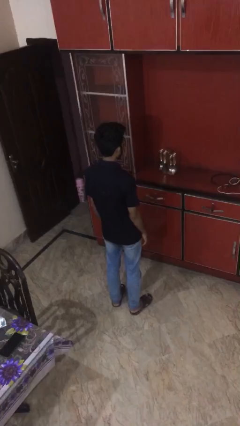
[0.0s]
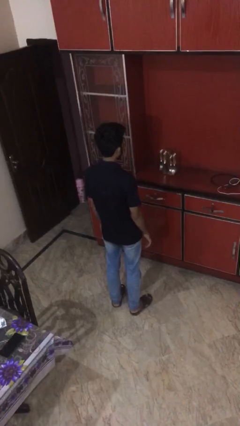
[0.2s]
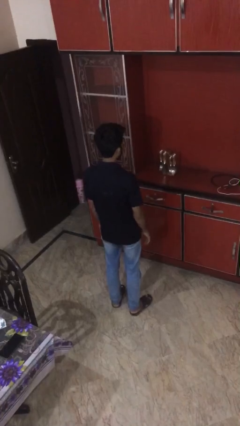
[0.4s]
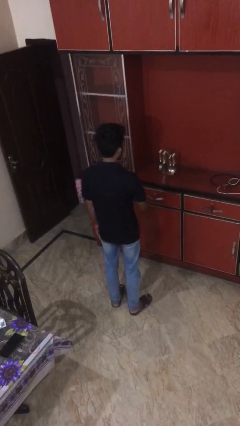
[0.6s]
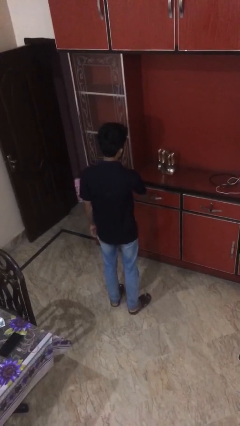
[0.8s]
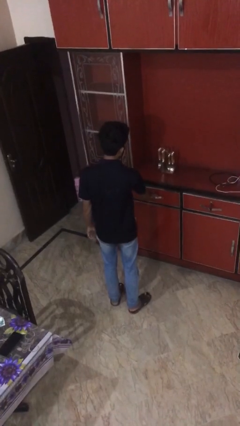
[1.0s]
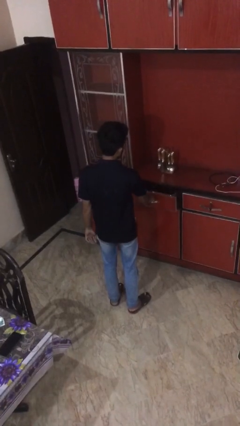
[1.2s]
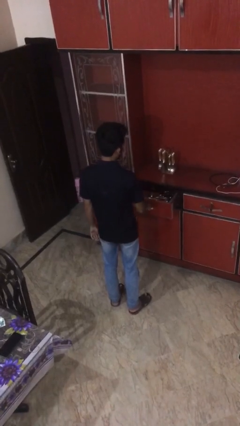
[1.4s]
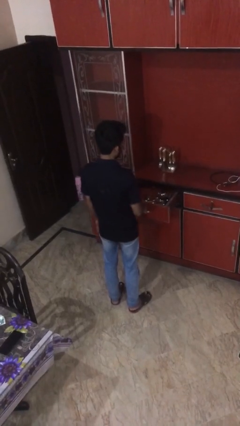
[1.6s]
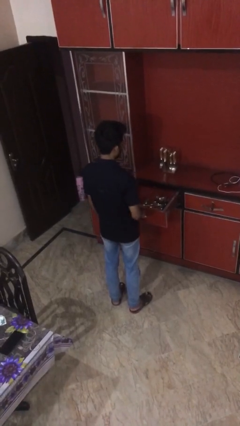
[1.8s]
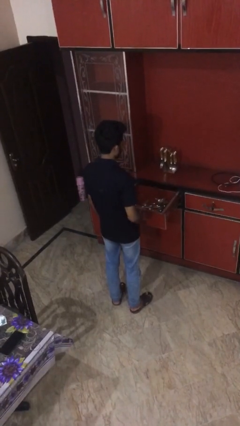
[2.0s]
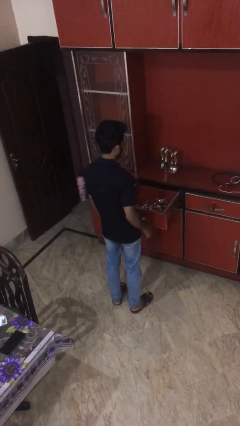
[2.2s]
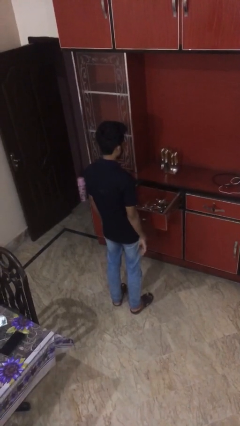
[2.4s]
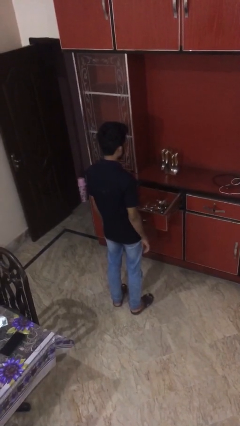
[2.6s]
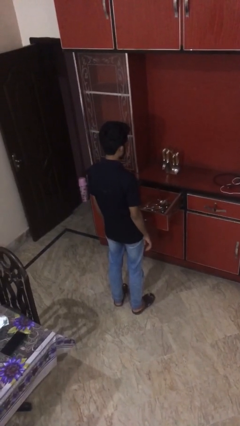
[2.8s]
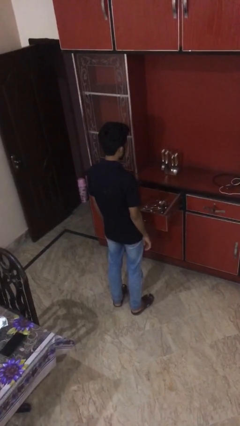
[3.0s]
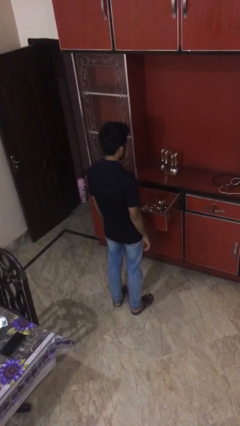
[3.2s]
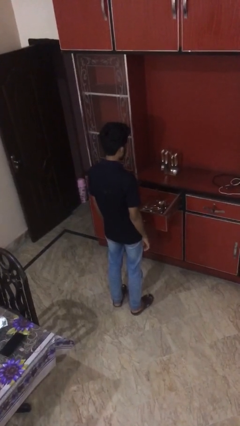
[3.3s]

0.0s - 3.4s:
person opens kitchen drawer

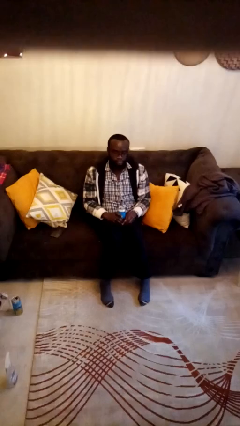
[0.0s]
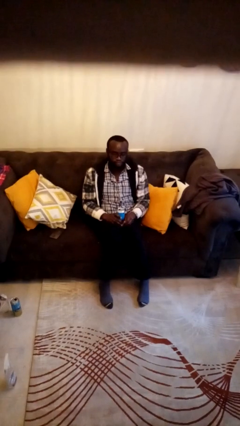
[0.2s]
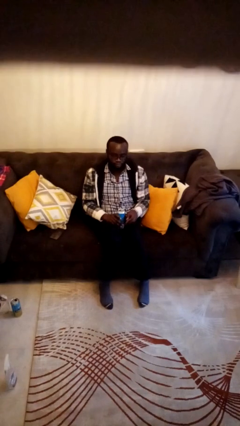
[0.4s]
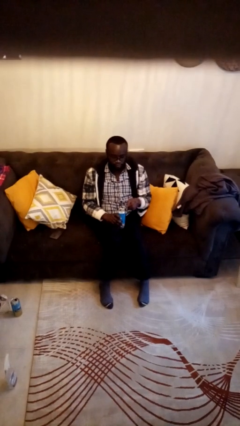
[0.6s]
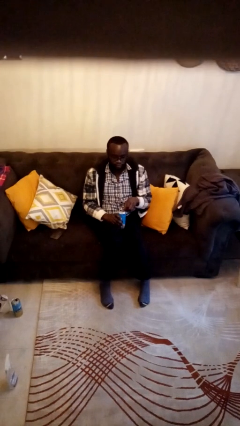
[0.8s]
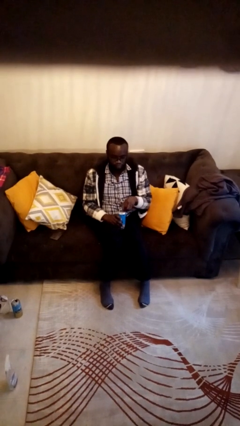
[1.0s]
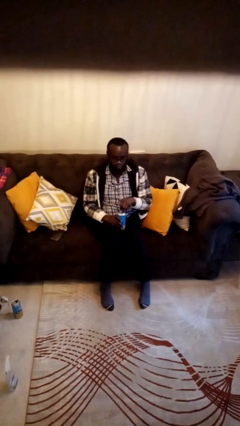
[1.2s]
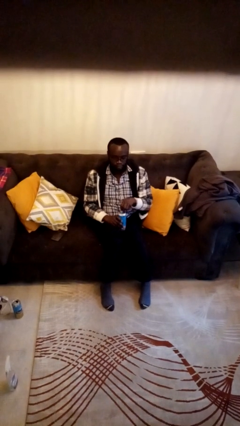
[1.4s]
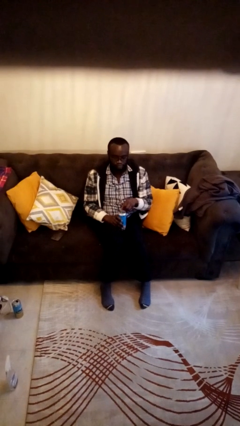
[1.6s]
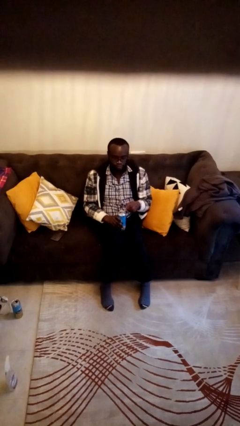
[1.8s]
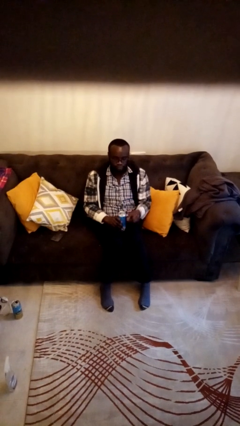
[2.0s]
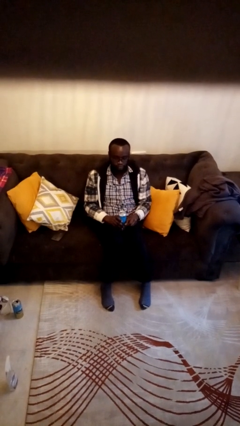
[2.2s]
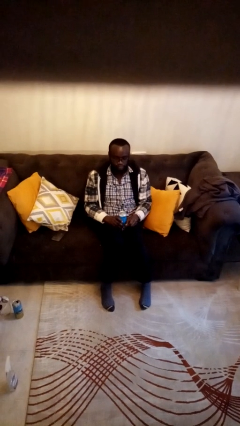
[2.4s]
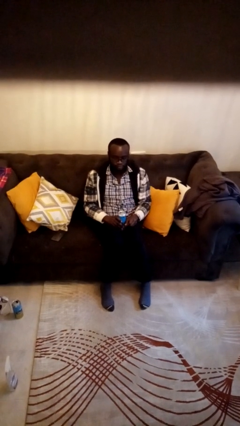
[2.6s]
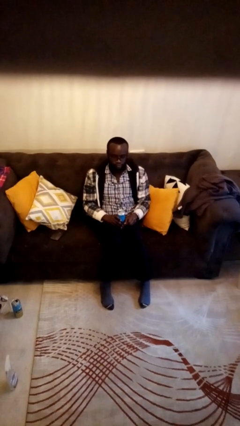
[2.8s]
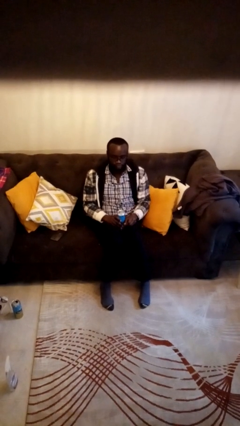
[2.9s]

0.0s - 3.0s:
person opens beverage can

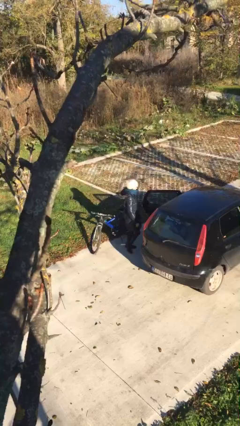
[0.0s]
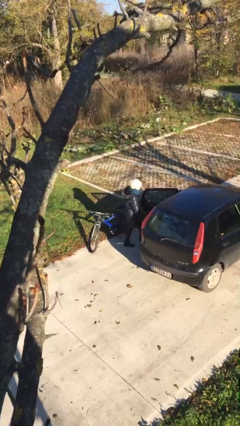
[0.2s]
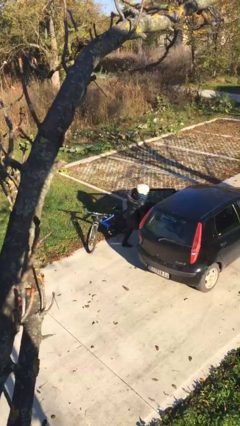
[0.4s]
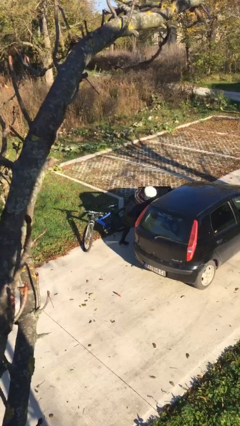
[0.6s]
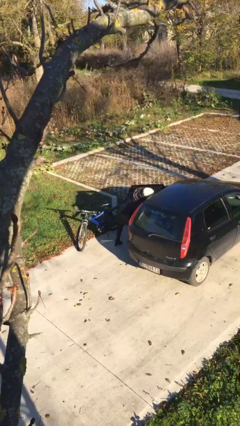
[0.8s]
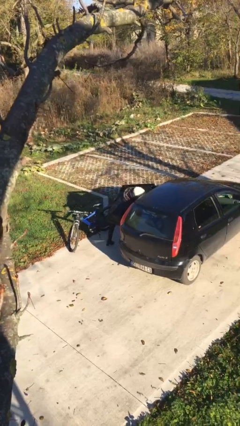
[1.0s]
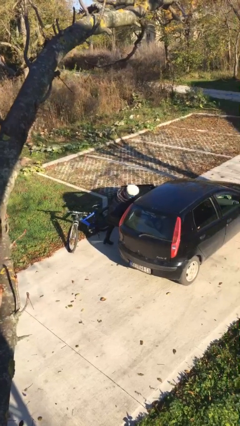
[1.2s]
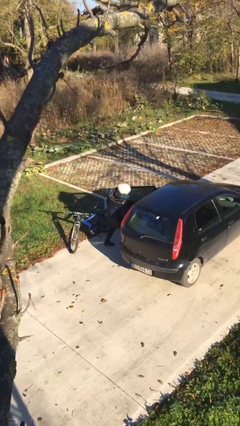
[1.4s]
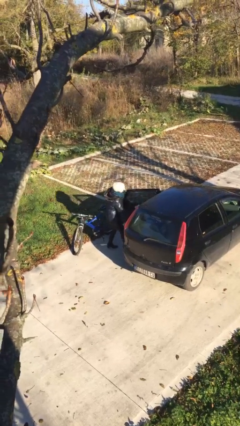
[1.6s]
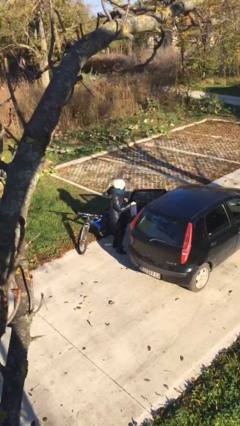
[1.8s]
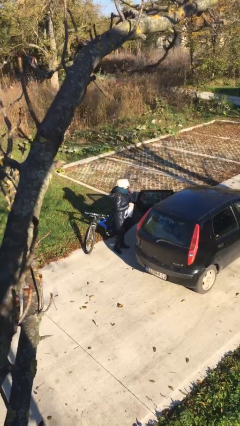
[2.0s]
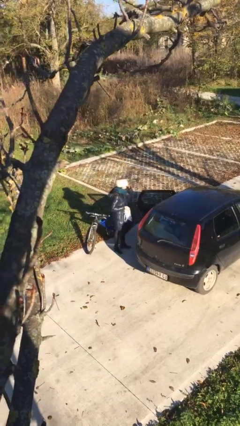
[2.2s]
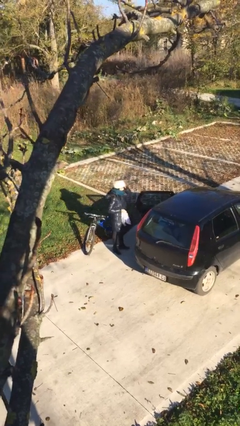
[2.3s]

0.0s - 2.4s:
person unloads car

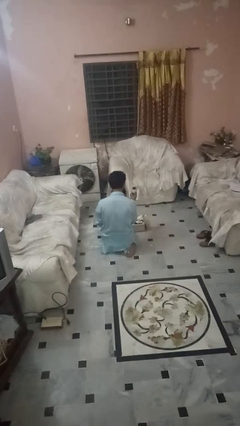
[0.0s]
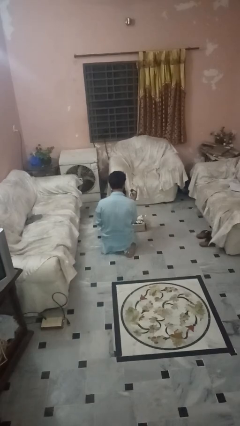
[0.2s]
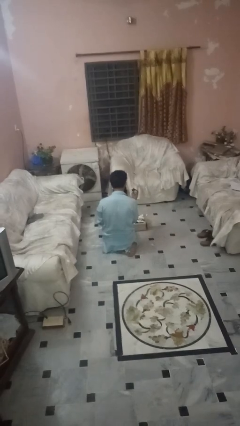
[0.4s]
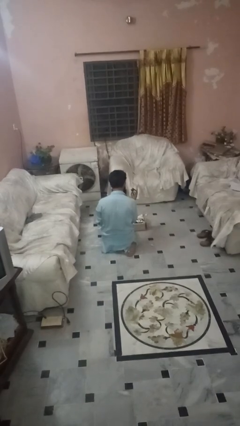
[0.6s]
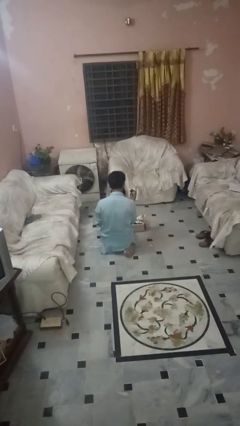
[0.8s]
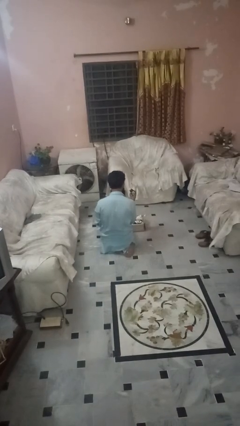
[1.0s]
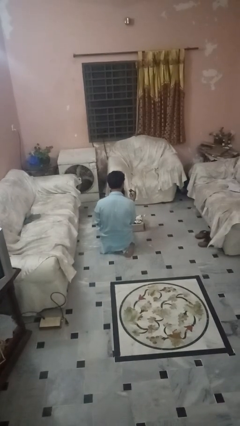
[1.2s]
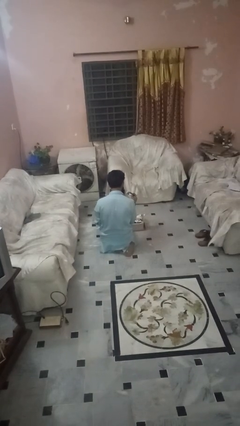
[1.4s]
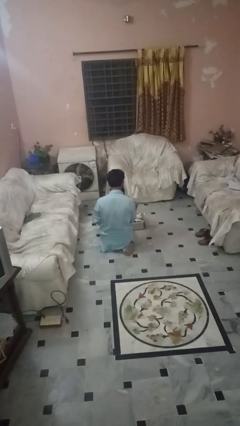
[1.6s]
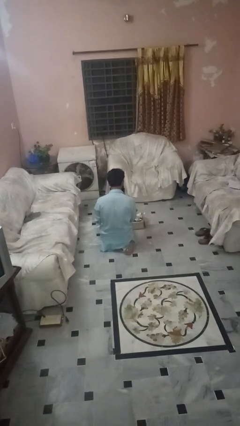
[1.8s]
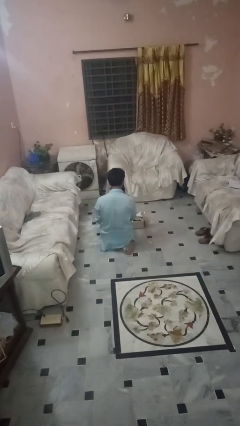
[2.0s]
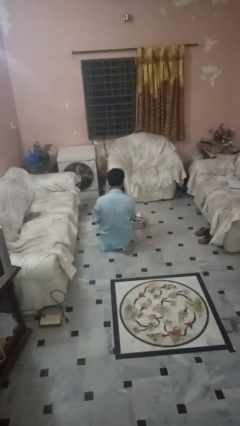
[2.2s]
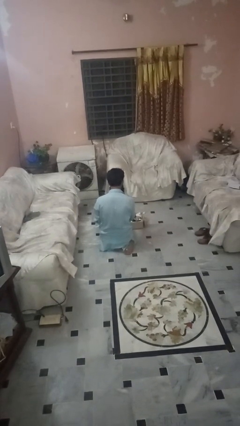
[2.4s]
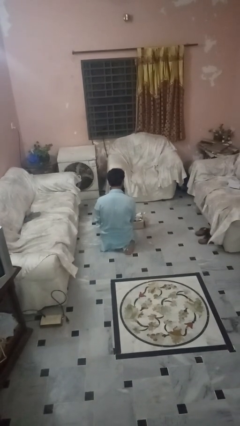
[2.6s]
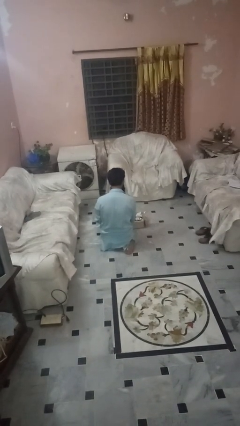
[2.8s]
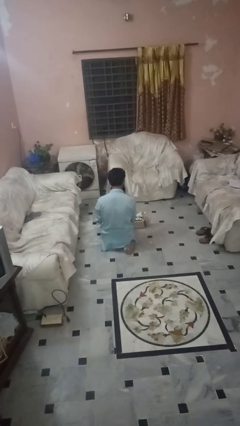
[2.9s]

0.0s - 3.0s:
person puts object into box

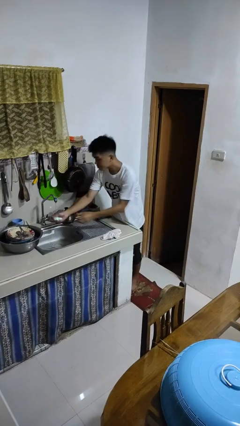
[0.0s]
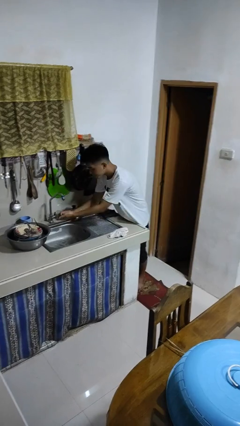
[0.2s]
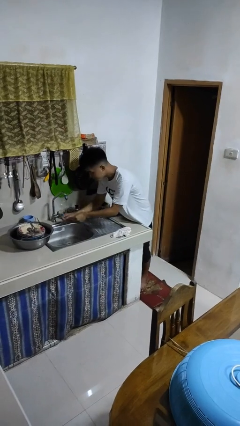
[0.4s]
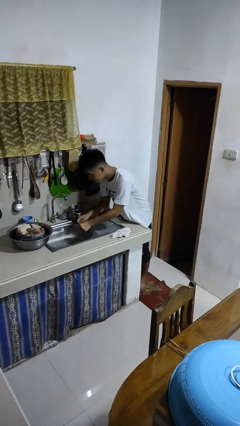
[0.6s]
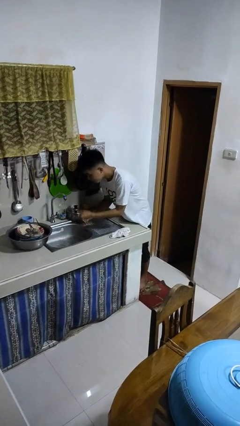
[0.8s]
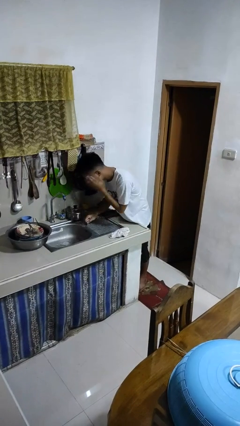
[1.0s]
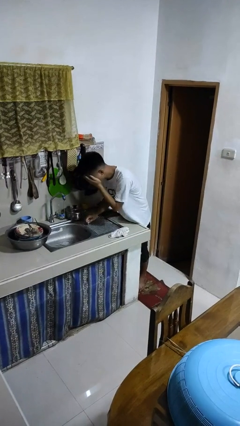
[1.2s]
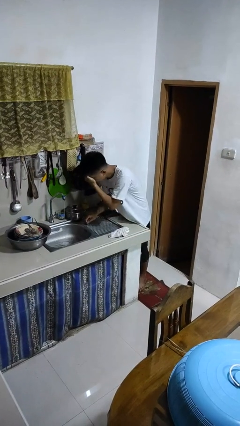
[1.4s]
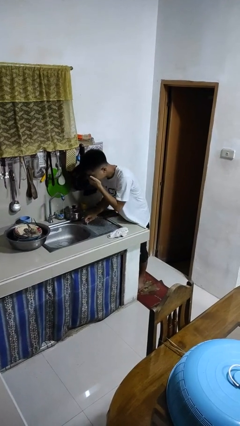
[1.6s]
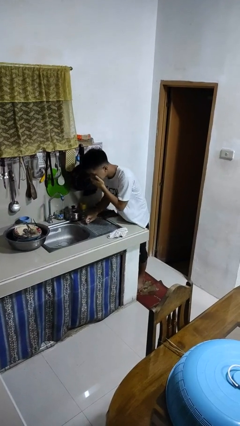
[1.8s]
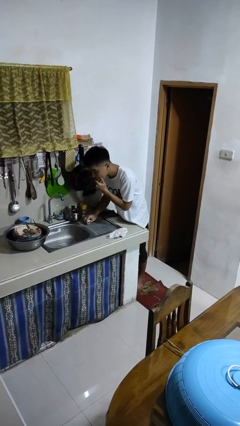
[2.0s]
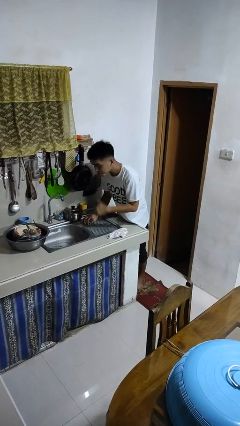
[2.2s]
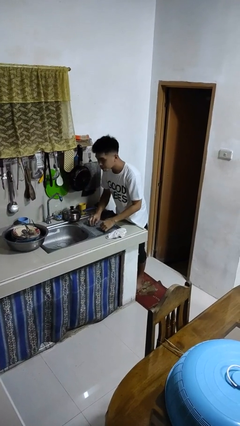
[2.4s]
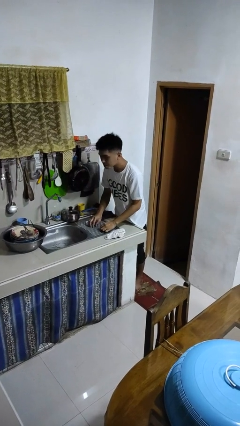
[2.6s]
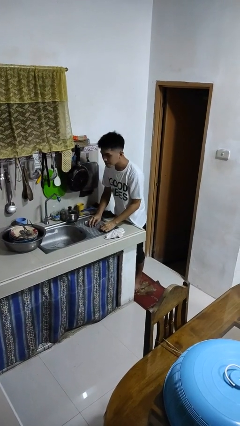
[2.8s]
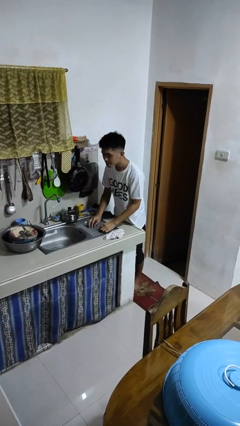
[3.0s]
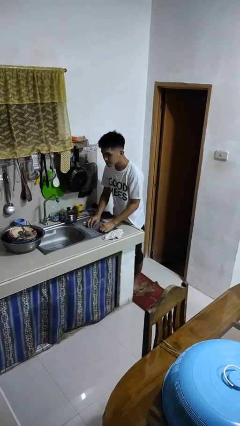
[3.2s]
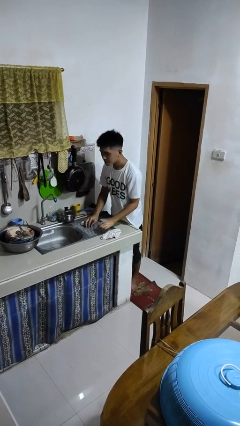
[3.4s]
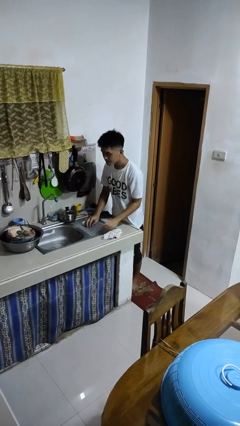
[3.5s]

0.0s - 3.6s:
person washes face

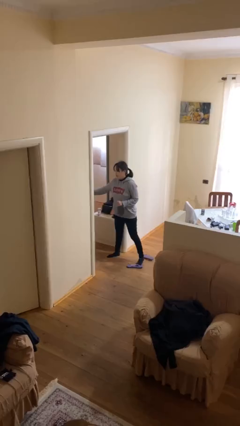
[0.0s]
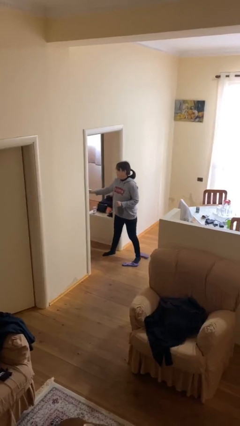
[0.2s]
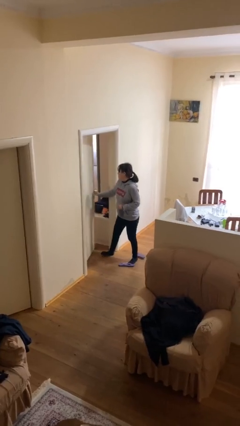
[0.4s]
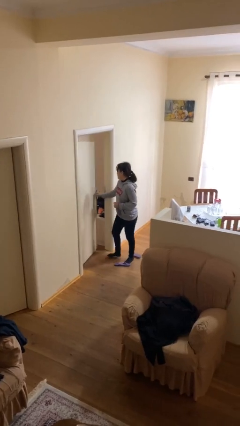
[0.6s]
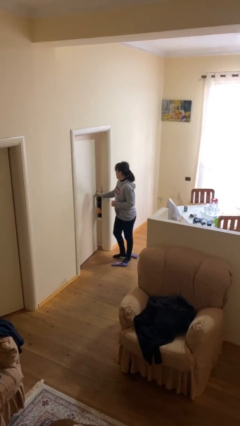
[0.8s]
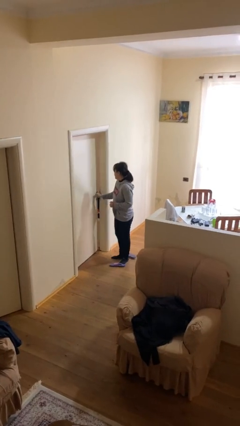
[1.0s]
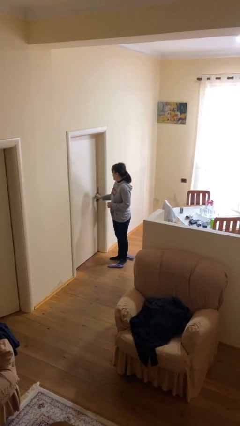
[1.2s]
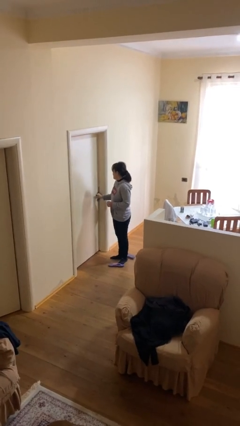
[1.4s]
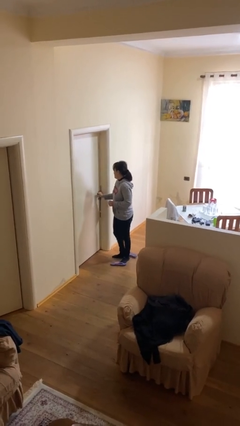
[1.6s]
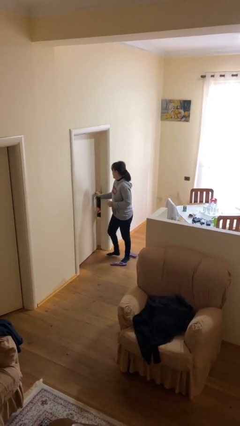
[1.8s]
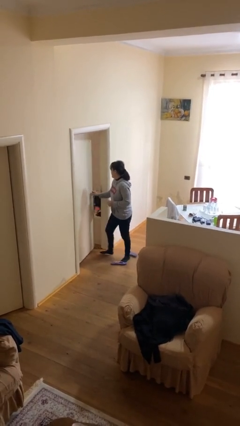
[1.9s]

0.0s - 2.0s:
person closes facility door
